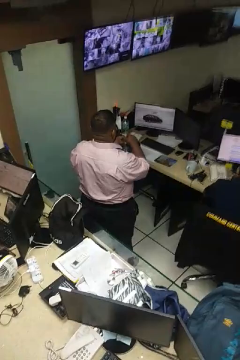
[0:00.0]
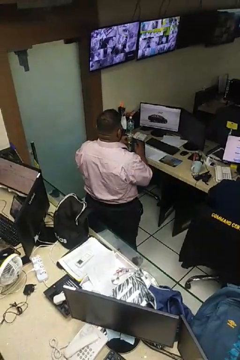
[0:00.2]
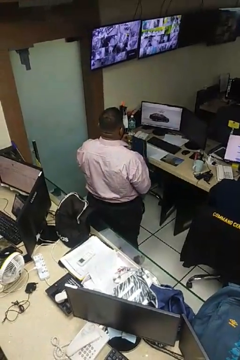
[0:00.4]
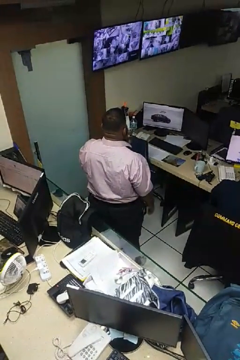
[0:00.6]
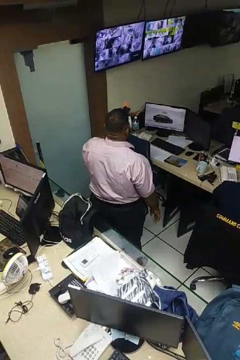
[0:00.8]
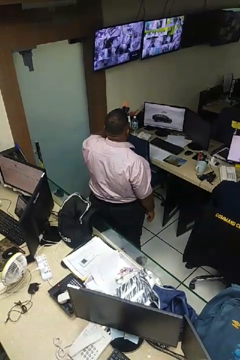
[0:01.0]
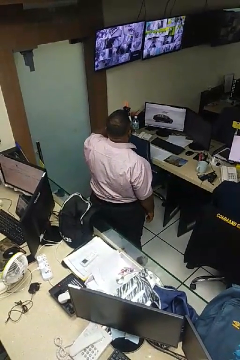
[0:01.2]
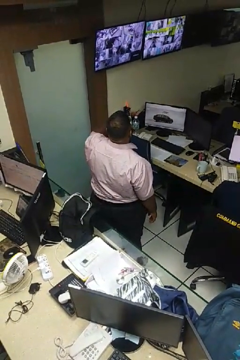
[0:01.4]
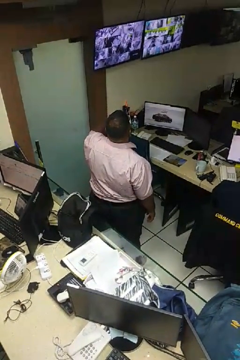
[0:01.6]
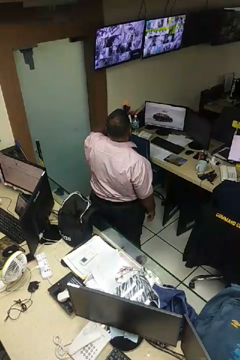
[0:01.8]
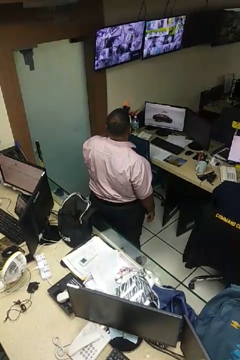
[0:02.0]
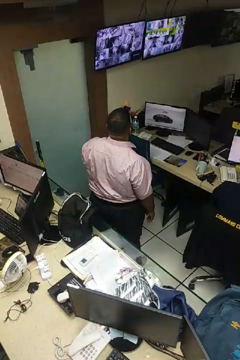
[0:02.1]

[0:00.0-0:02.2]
person drinks from beverage can

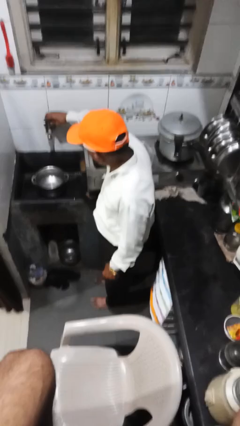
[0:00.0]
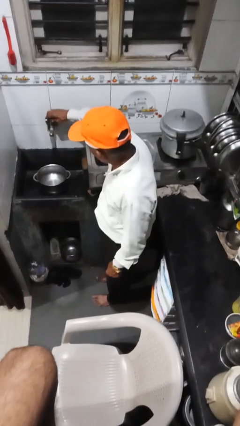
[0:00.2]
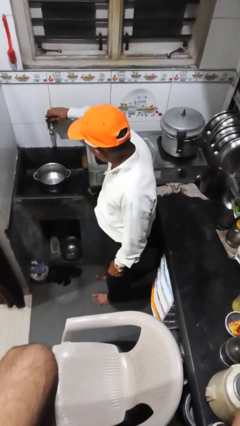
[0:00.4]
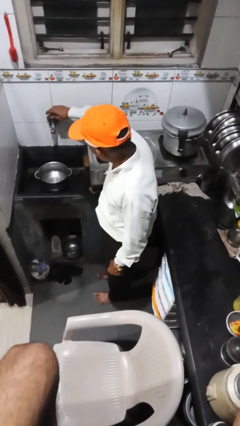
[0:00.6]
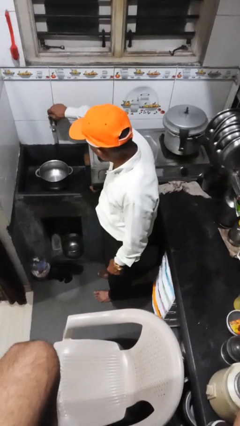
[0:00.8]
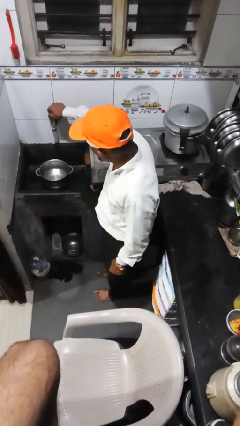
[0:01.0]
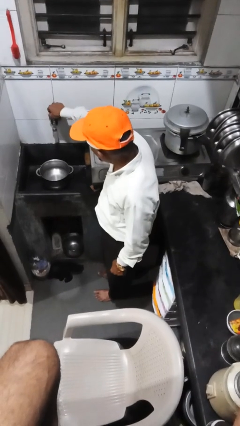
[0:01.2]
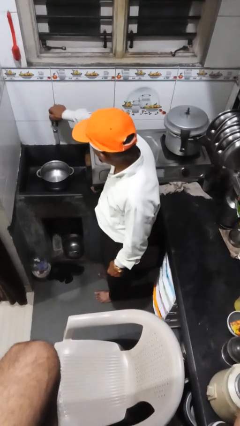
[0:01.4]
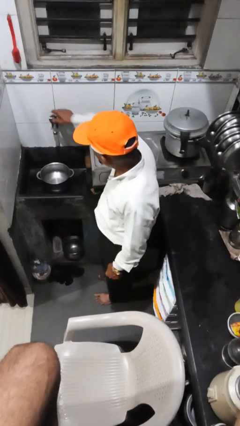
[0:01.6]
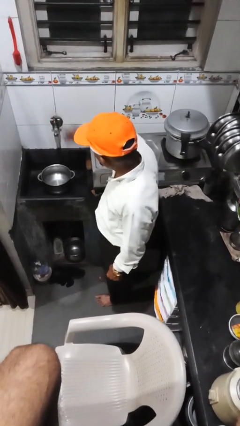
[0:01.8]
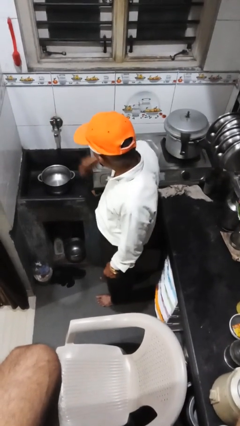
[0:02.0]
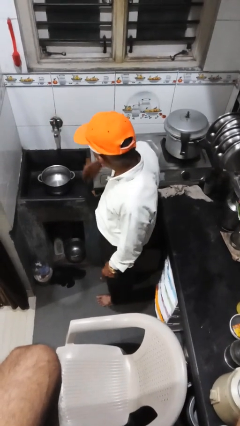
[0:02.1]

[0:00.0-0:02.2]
person turns off faucet

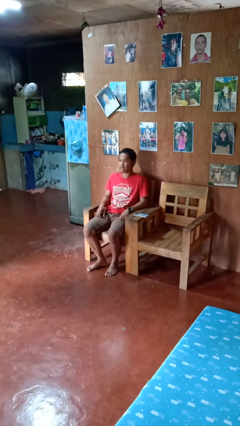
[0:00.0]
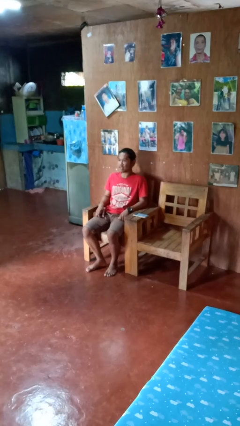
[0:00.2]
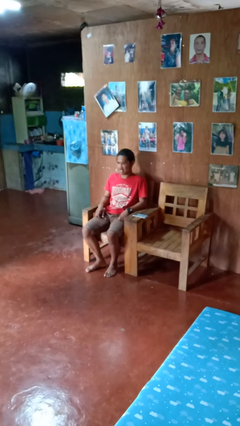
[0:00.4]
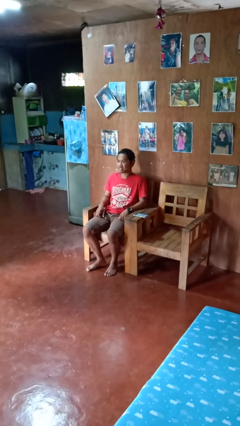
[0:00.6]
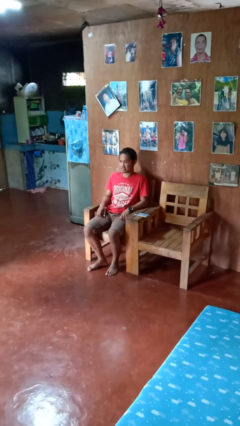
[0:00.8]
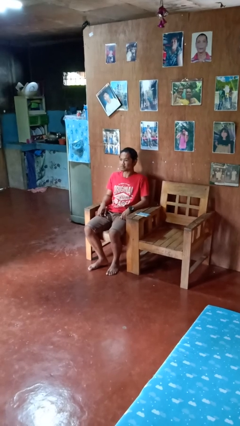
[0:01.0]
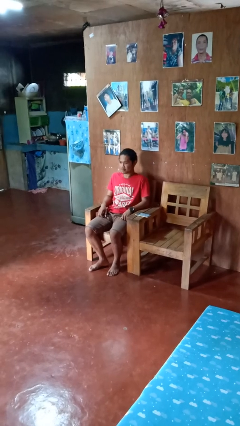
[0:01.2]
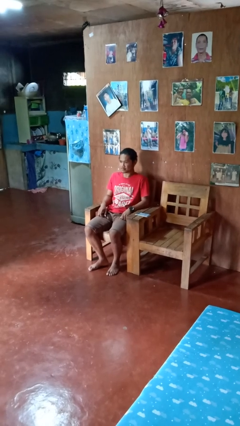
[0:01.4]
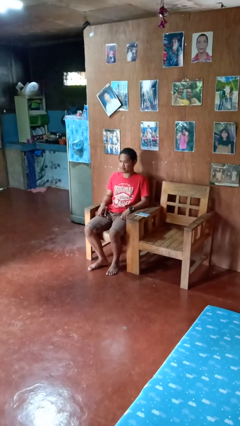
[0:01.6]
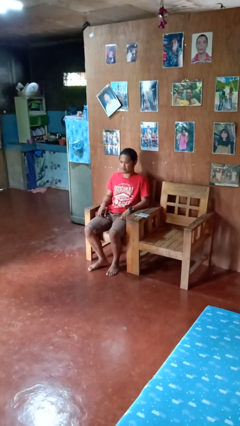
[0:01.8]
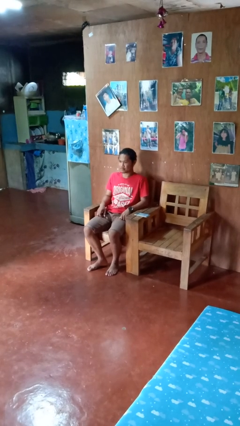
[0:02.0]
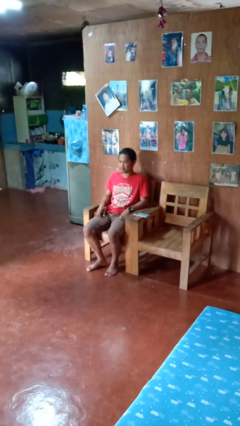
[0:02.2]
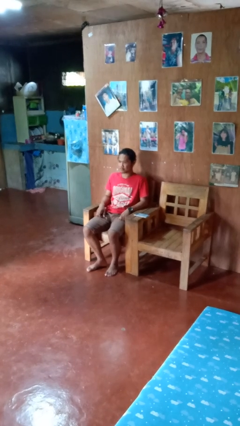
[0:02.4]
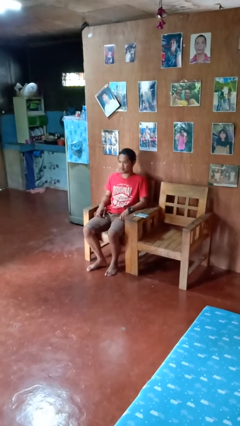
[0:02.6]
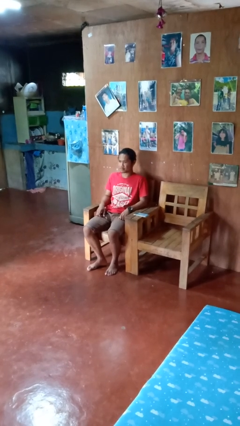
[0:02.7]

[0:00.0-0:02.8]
person nods head

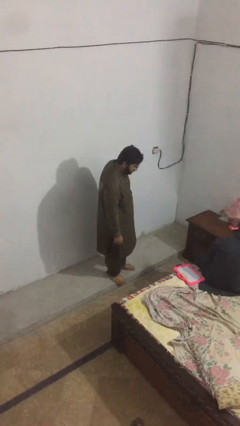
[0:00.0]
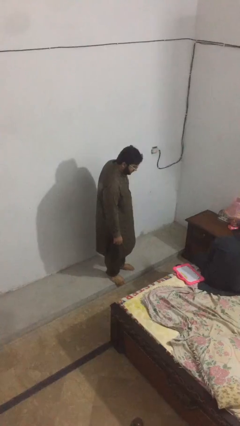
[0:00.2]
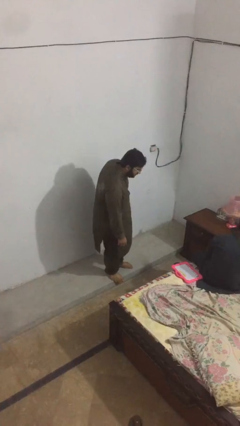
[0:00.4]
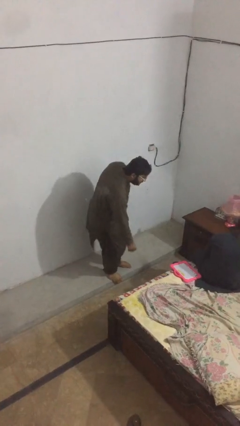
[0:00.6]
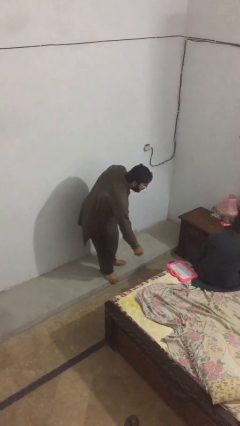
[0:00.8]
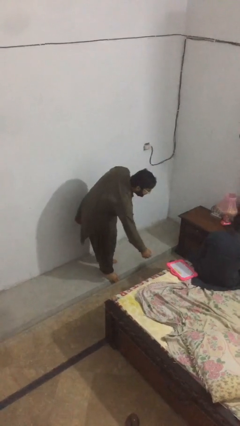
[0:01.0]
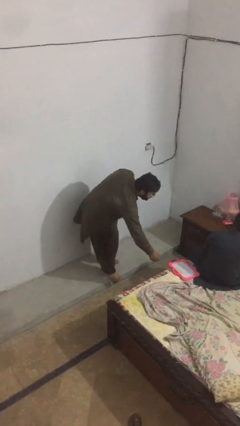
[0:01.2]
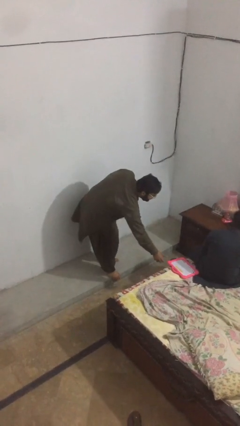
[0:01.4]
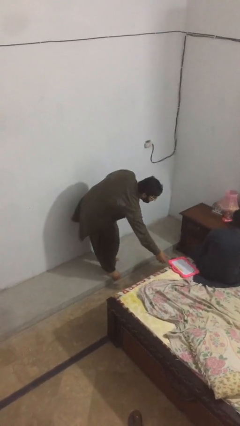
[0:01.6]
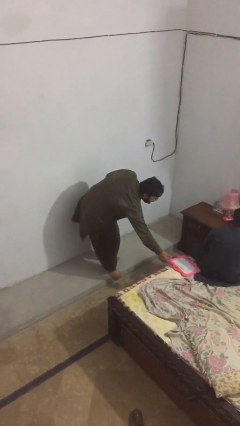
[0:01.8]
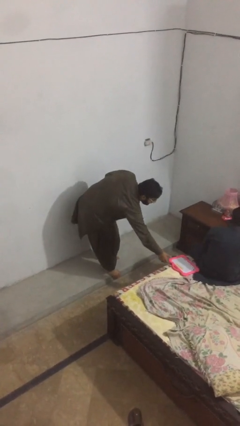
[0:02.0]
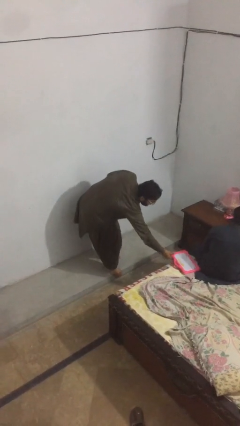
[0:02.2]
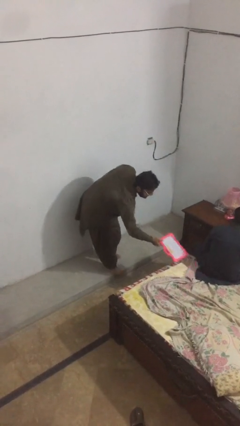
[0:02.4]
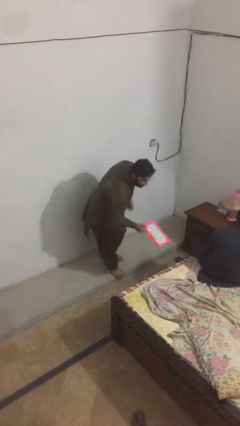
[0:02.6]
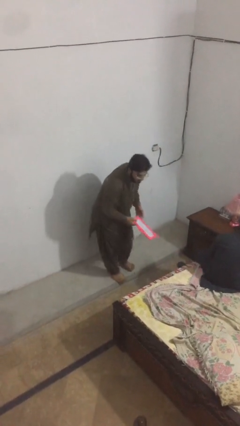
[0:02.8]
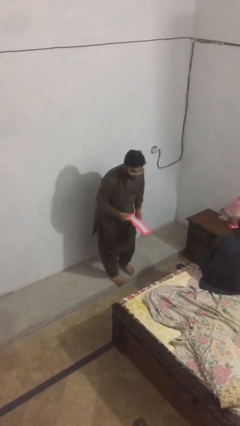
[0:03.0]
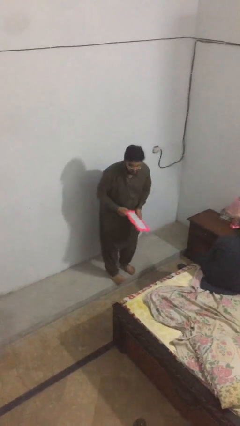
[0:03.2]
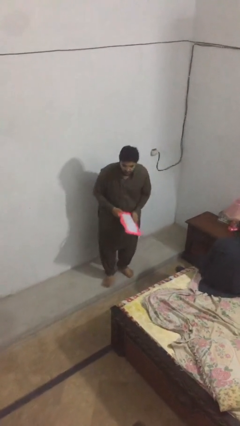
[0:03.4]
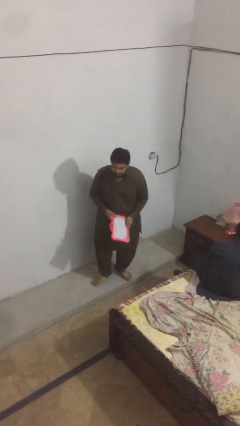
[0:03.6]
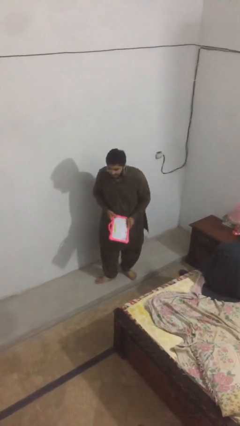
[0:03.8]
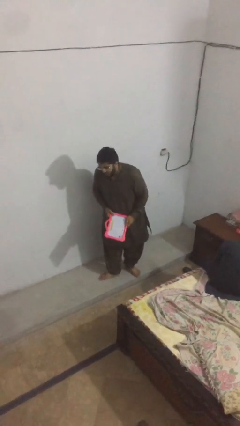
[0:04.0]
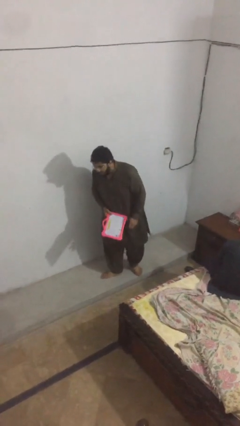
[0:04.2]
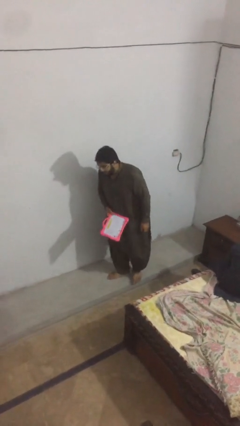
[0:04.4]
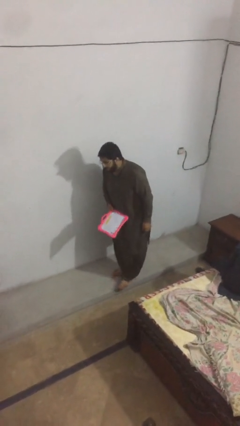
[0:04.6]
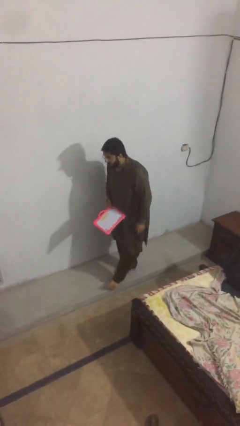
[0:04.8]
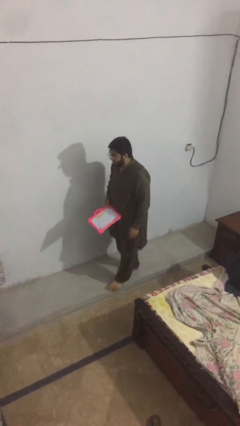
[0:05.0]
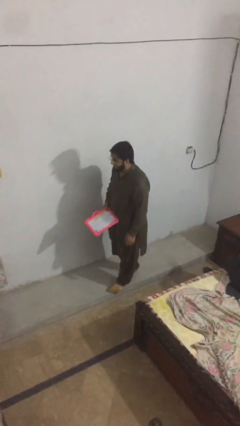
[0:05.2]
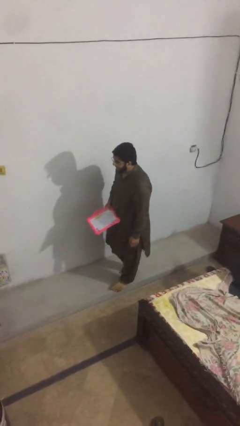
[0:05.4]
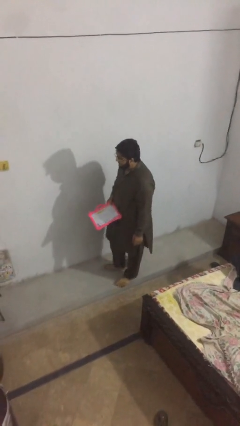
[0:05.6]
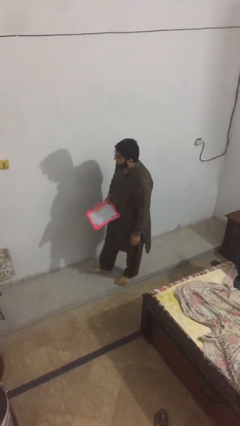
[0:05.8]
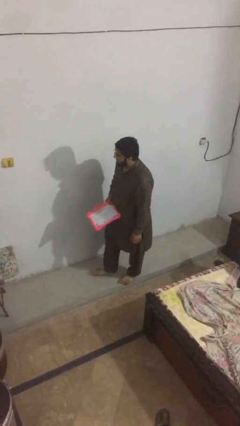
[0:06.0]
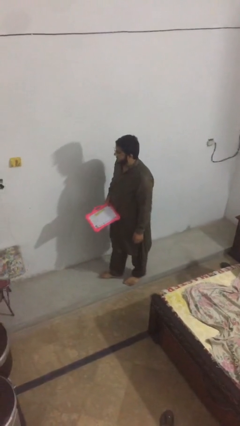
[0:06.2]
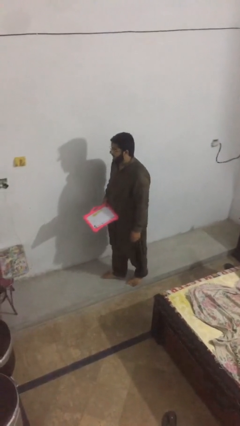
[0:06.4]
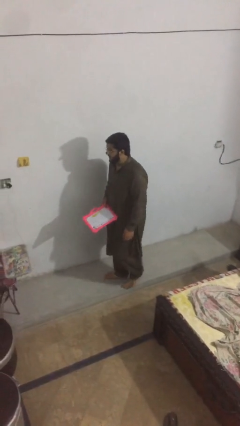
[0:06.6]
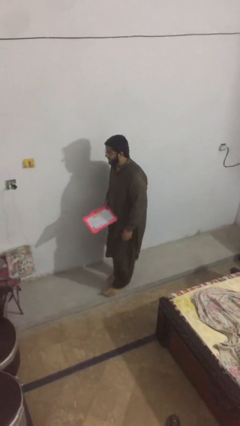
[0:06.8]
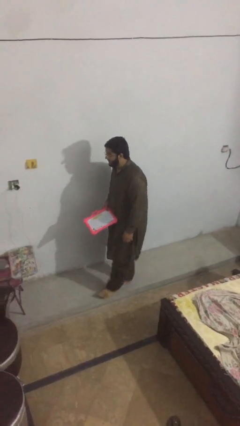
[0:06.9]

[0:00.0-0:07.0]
person steals object from person

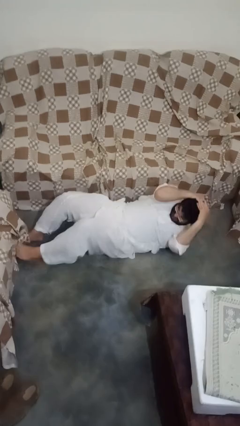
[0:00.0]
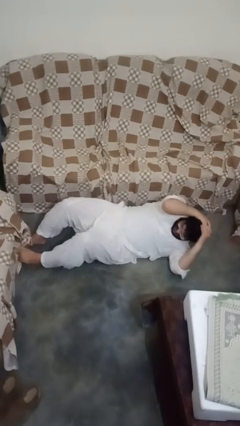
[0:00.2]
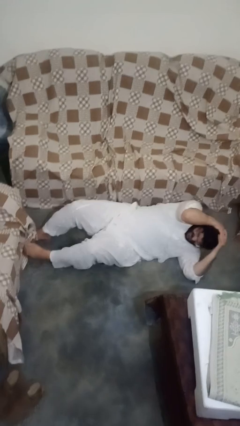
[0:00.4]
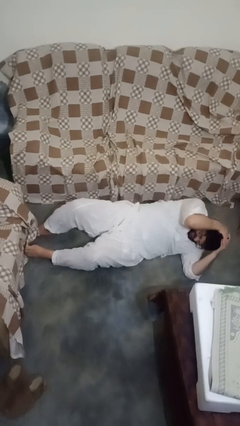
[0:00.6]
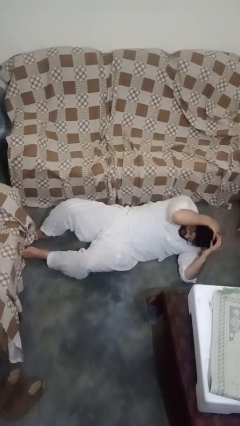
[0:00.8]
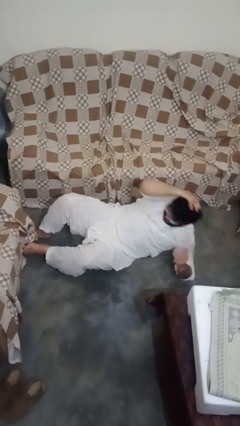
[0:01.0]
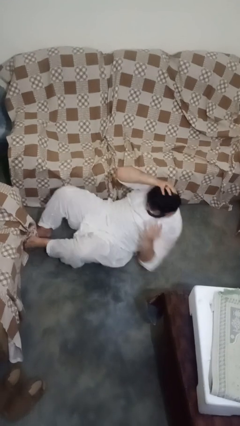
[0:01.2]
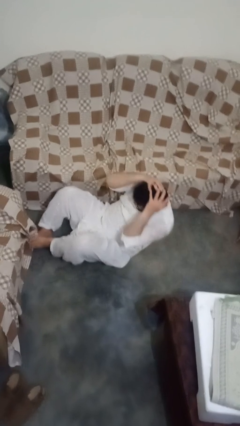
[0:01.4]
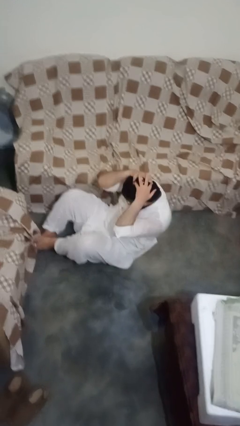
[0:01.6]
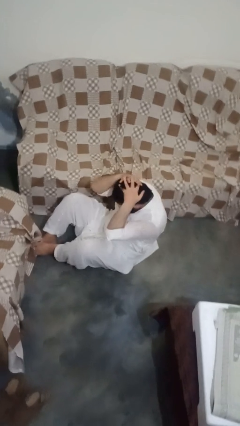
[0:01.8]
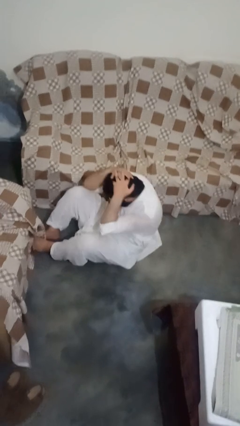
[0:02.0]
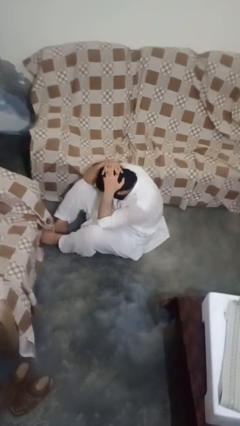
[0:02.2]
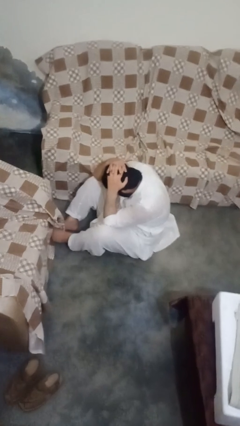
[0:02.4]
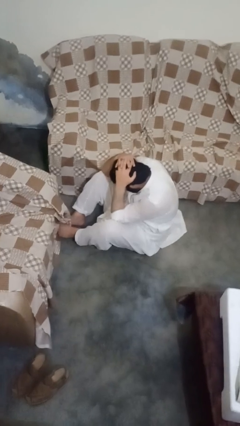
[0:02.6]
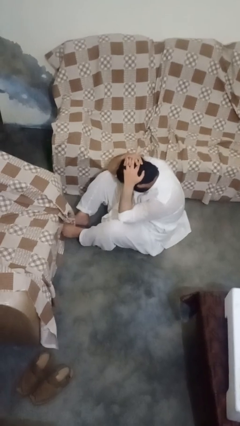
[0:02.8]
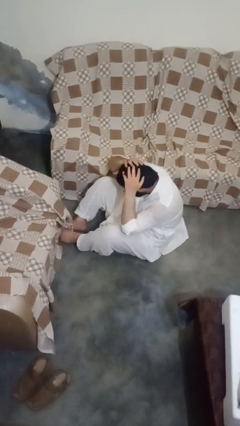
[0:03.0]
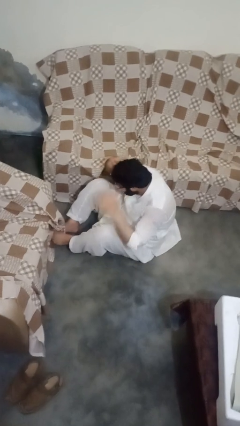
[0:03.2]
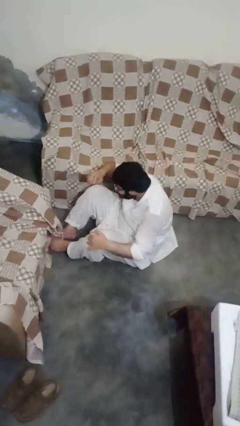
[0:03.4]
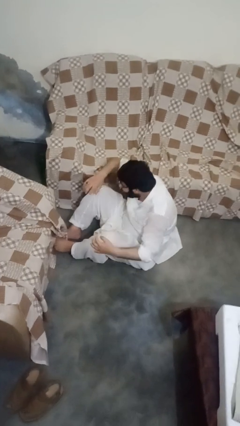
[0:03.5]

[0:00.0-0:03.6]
person exercises with situp

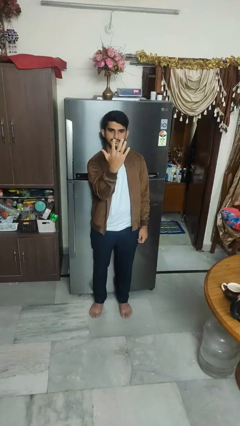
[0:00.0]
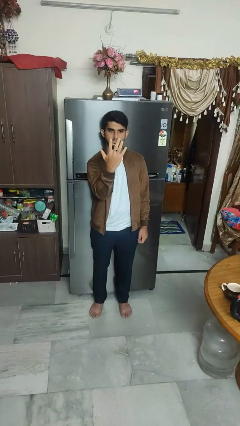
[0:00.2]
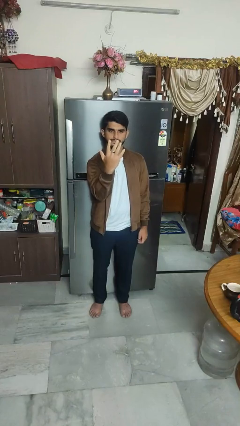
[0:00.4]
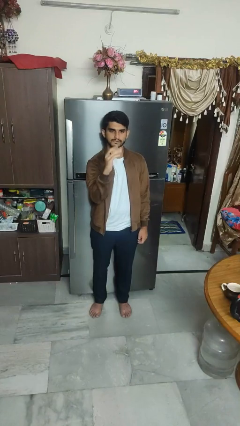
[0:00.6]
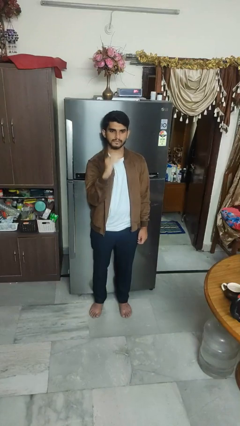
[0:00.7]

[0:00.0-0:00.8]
person gestures number five
